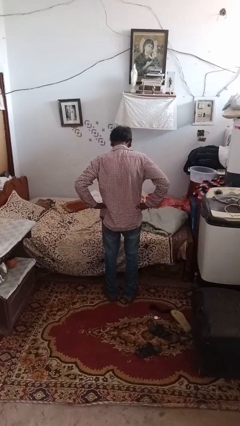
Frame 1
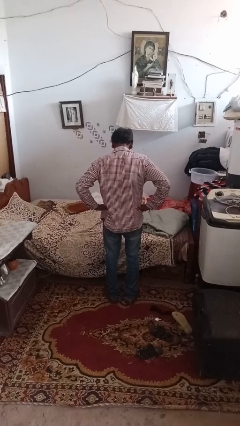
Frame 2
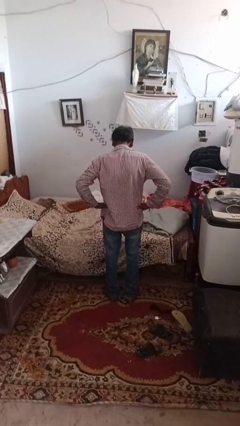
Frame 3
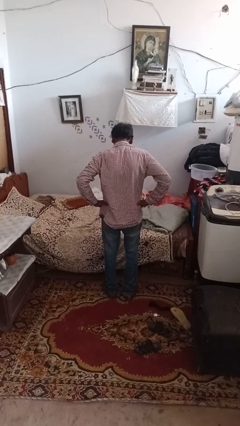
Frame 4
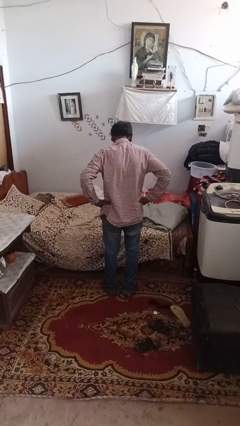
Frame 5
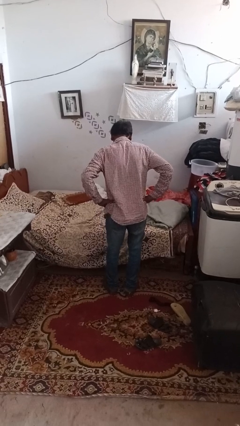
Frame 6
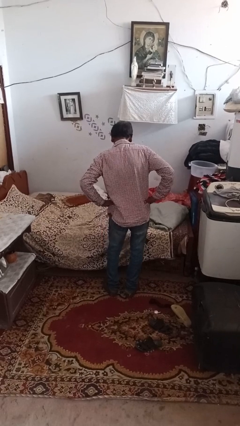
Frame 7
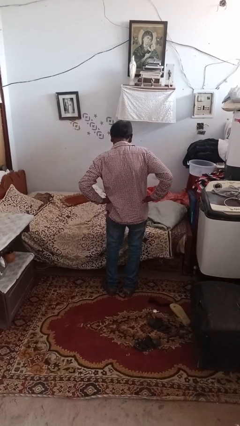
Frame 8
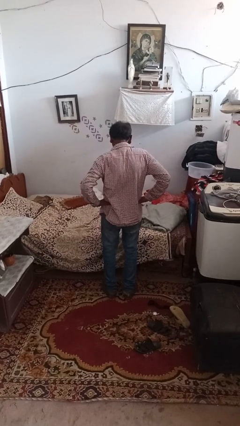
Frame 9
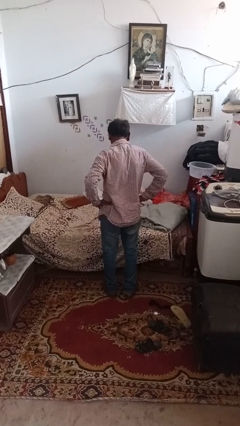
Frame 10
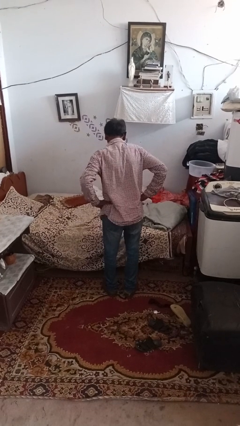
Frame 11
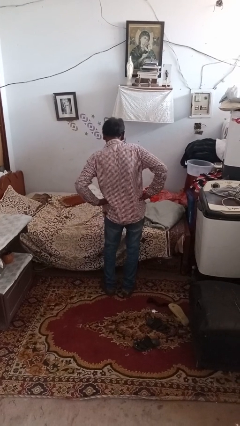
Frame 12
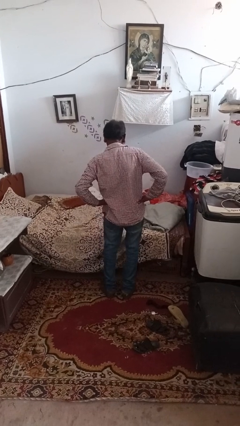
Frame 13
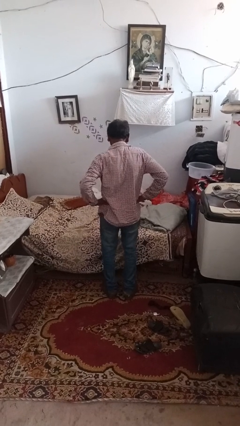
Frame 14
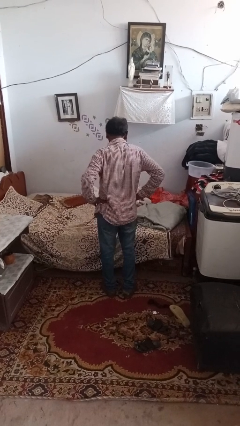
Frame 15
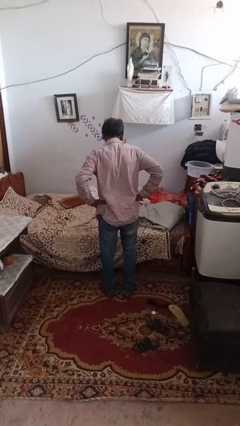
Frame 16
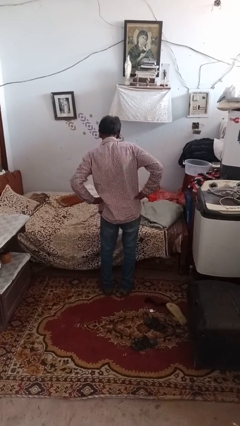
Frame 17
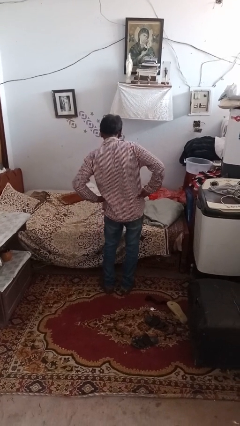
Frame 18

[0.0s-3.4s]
person wiggles hips

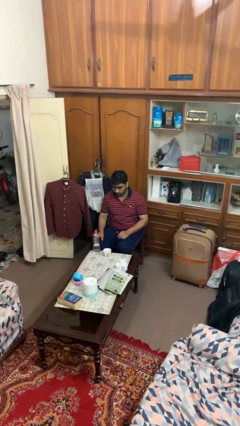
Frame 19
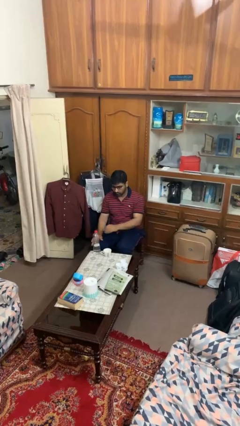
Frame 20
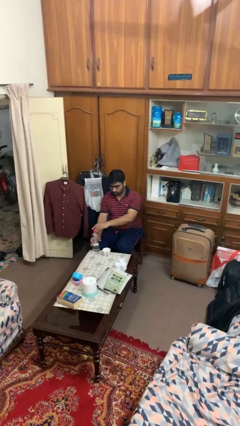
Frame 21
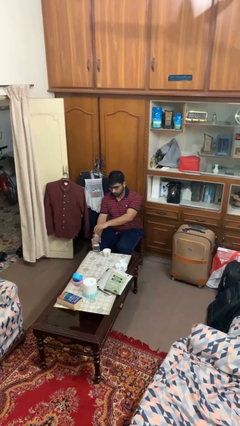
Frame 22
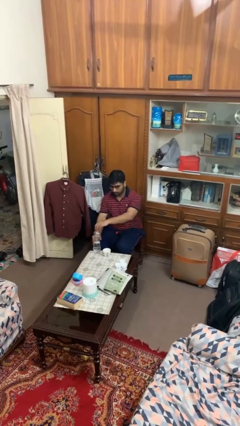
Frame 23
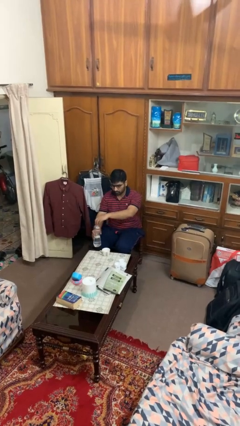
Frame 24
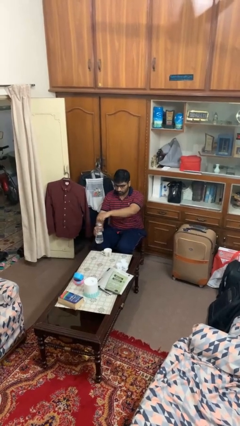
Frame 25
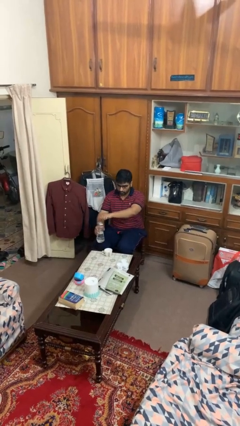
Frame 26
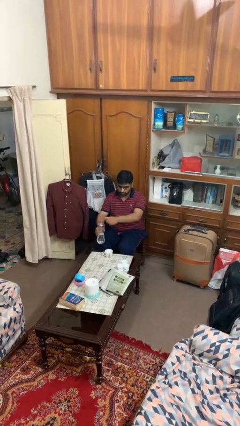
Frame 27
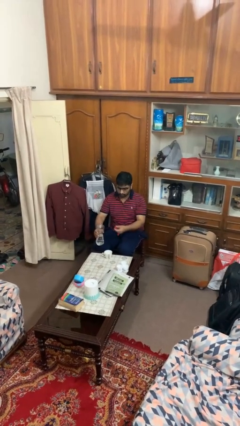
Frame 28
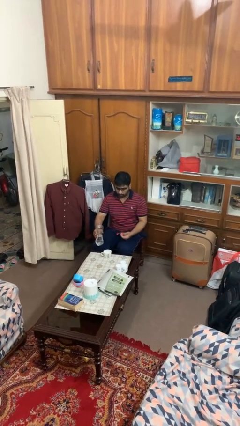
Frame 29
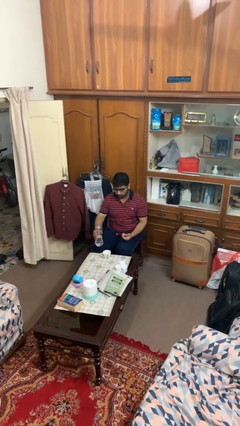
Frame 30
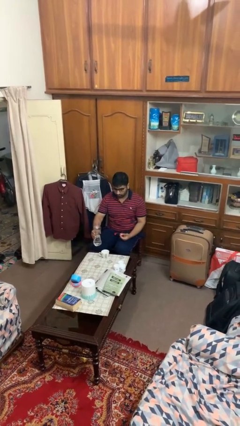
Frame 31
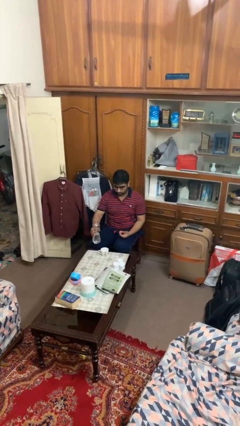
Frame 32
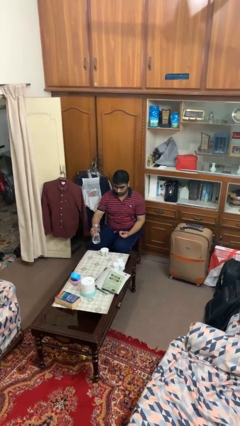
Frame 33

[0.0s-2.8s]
person unscrews lid from bottle

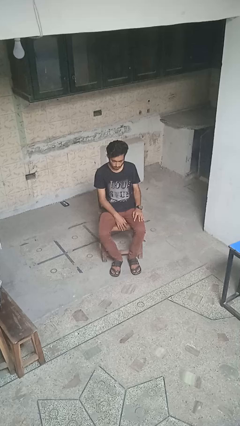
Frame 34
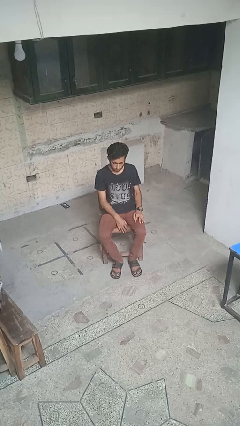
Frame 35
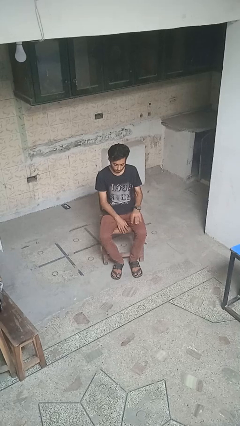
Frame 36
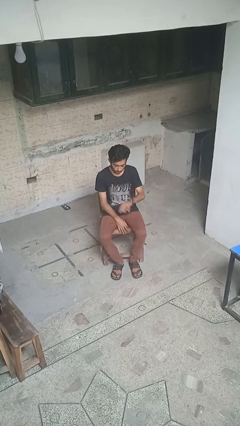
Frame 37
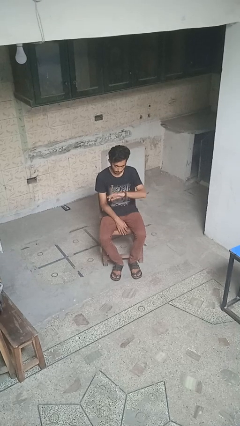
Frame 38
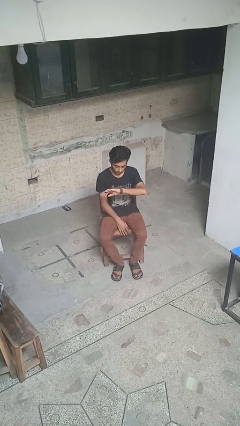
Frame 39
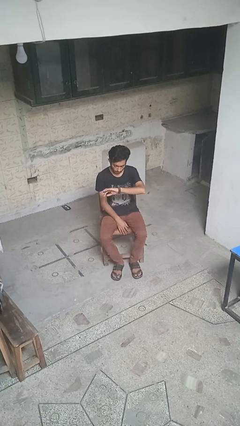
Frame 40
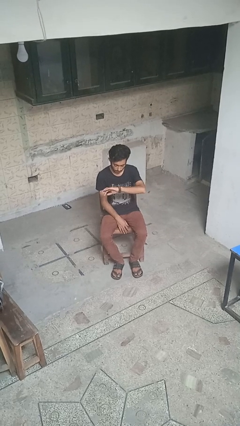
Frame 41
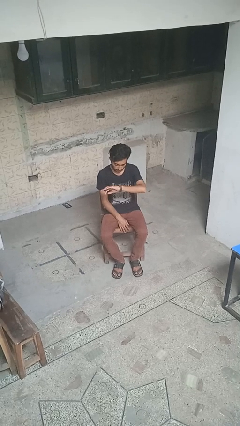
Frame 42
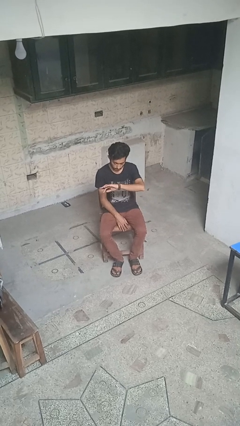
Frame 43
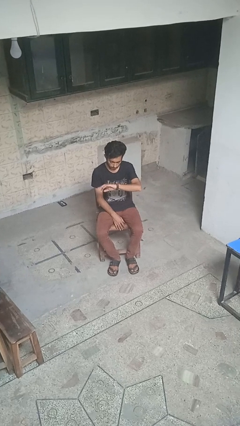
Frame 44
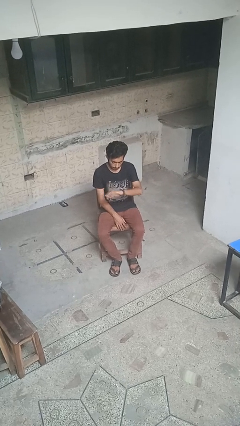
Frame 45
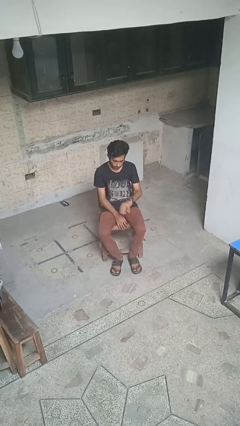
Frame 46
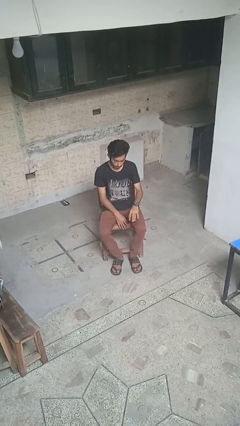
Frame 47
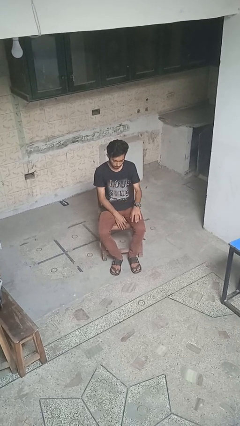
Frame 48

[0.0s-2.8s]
person looks at wristwatch

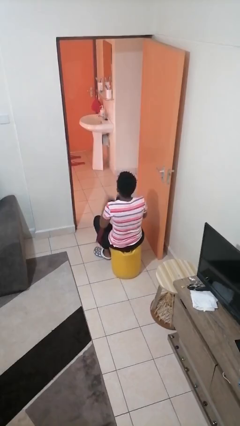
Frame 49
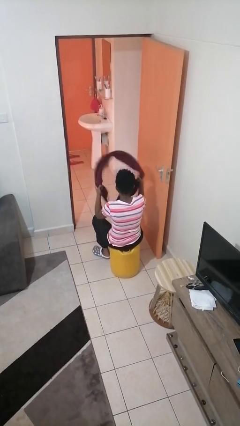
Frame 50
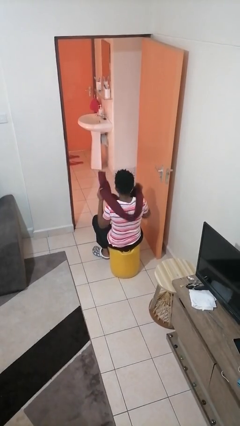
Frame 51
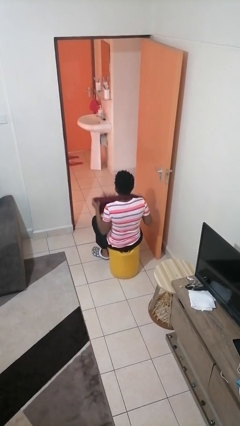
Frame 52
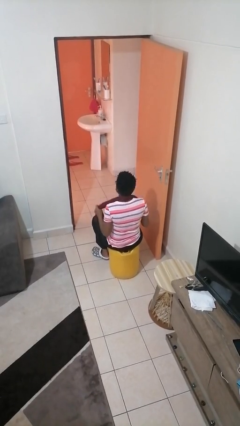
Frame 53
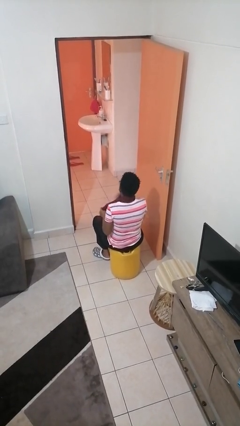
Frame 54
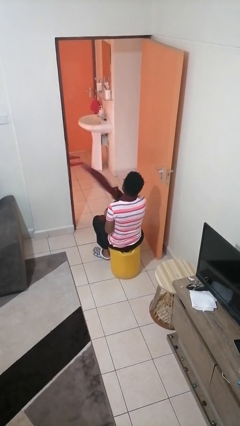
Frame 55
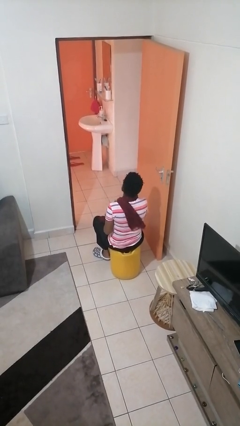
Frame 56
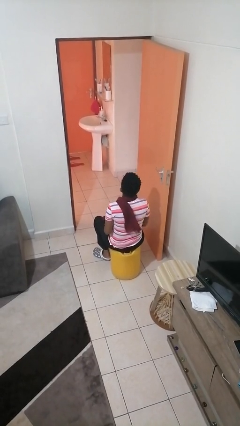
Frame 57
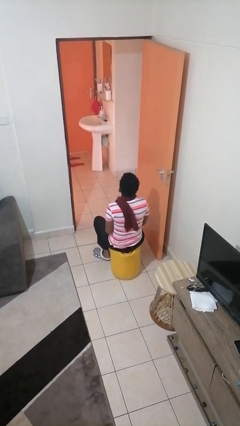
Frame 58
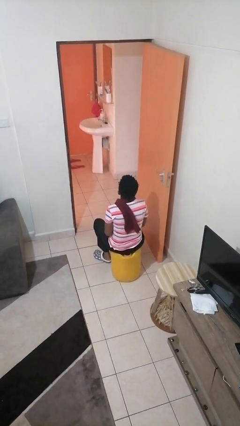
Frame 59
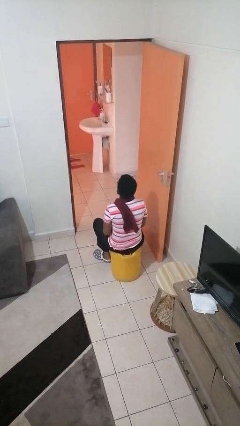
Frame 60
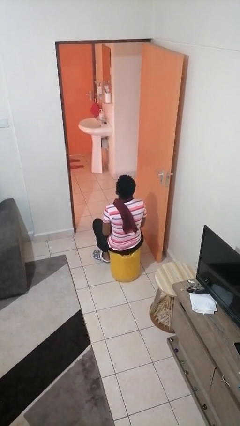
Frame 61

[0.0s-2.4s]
person puts on scarf

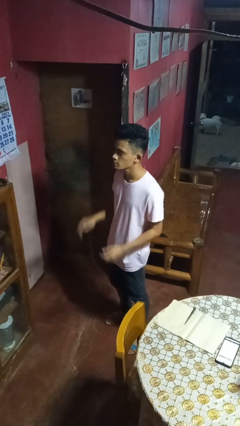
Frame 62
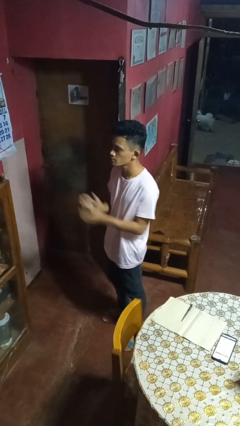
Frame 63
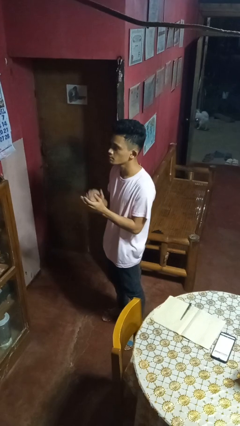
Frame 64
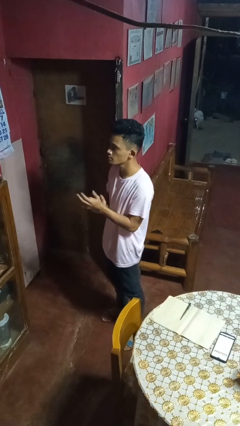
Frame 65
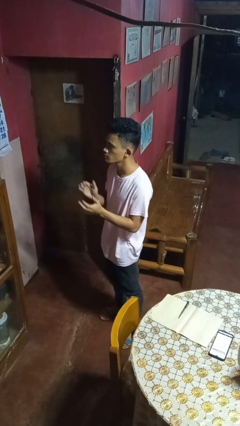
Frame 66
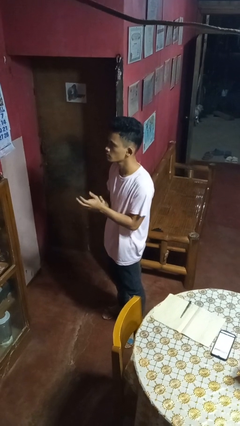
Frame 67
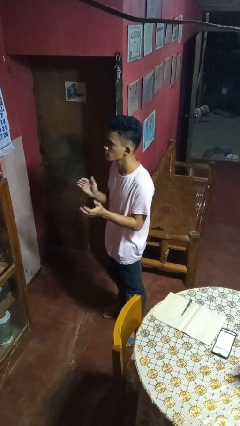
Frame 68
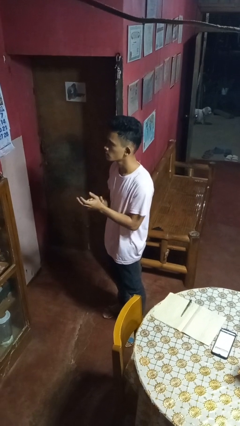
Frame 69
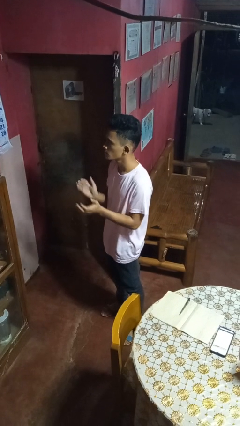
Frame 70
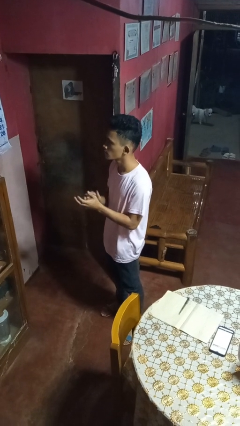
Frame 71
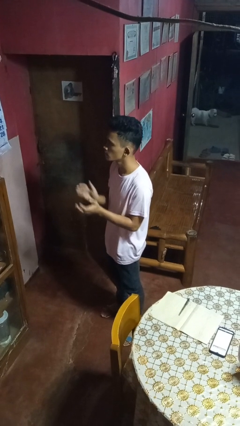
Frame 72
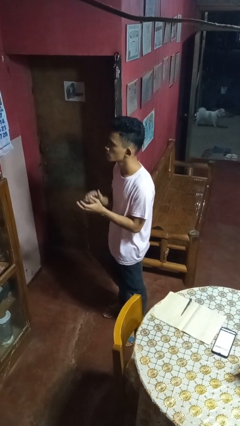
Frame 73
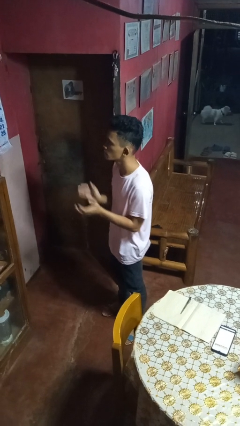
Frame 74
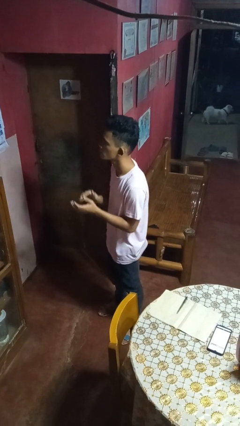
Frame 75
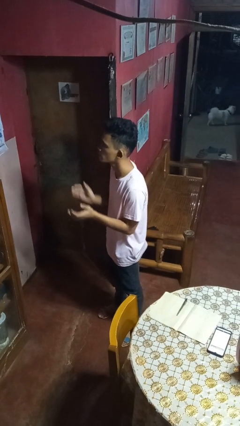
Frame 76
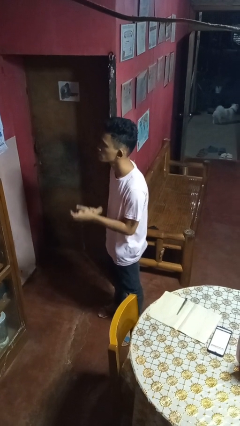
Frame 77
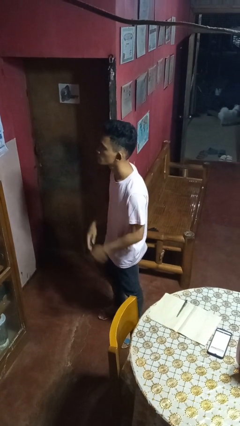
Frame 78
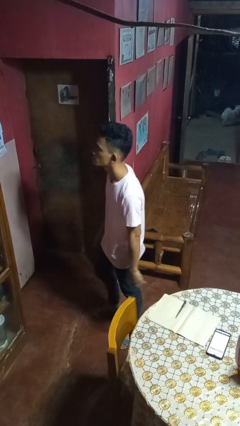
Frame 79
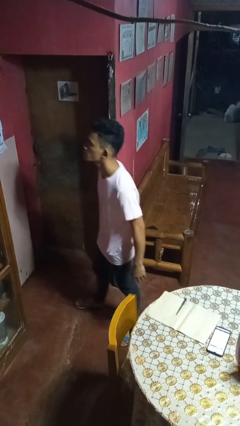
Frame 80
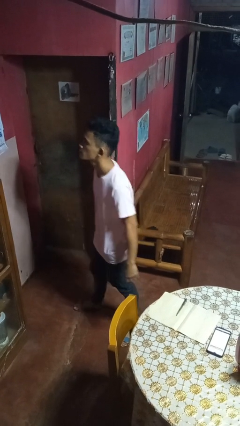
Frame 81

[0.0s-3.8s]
person claps hands

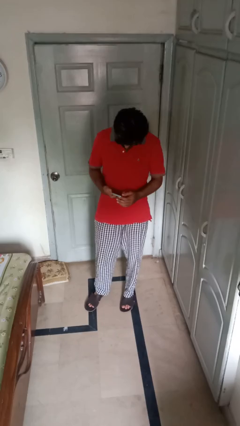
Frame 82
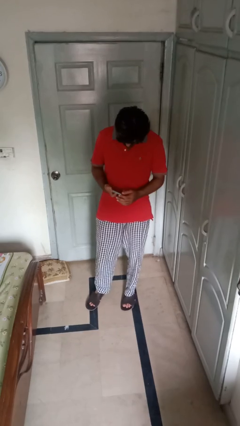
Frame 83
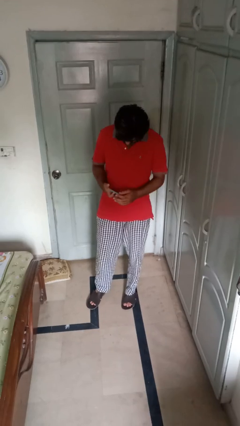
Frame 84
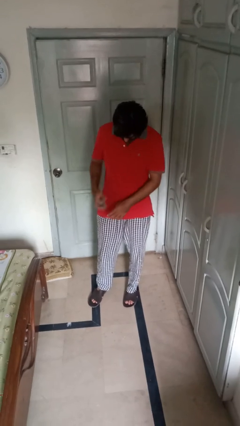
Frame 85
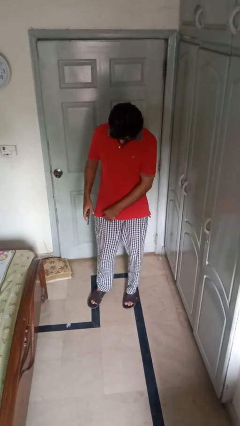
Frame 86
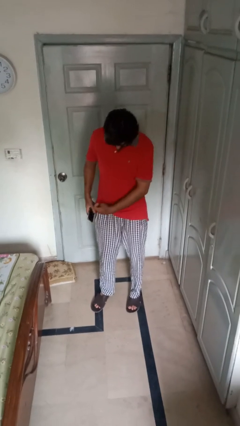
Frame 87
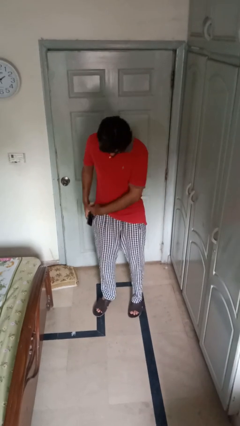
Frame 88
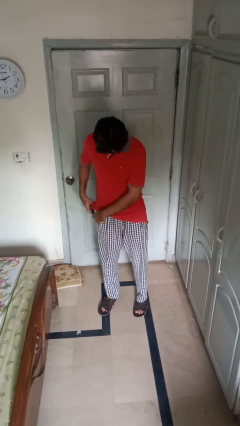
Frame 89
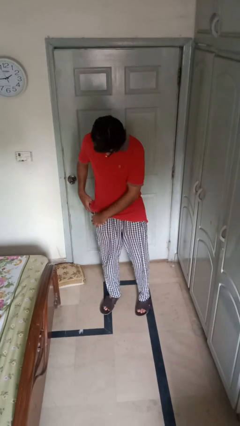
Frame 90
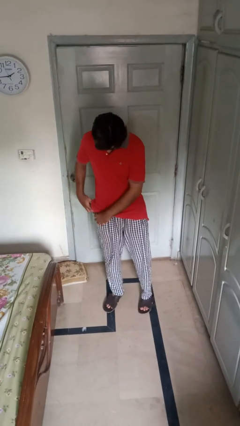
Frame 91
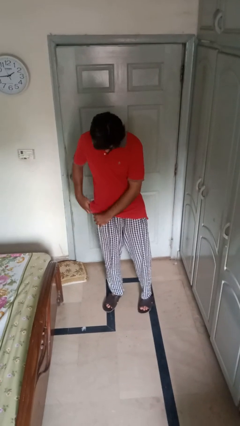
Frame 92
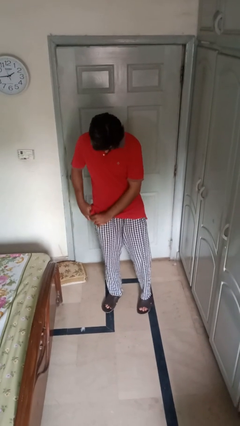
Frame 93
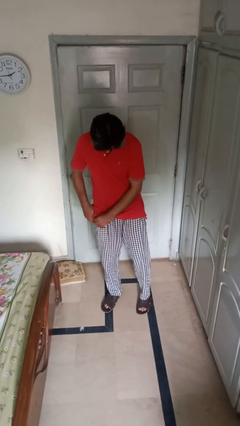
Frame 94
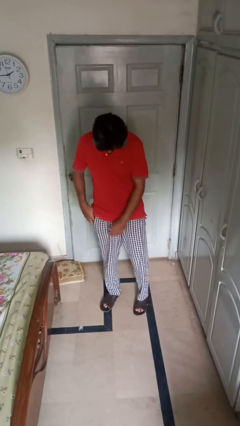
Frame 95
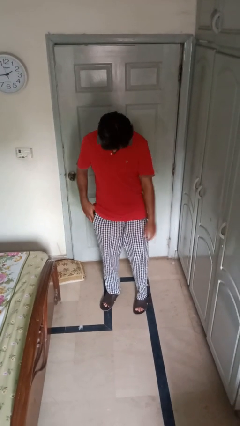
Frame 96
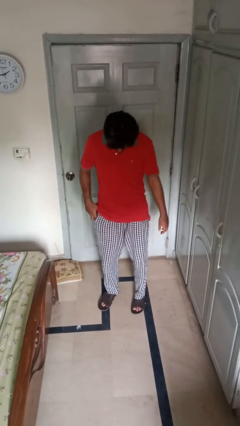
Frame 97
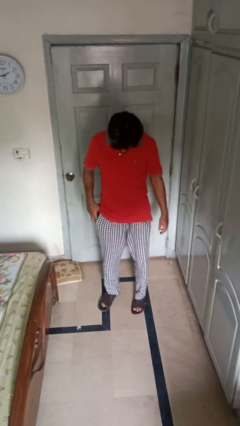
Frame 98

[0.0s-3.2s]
person puts phone into pocket
